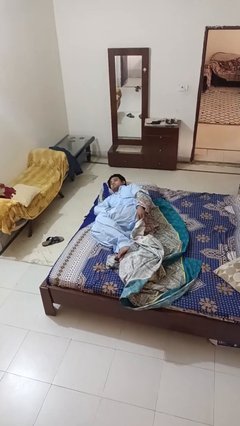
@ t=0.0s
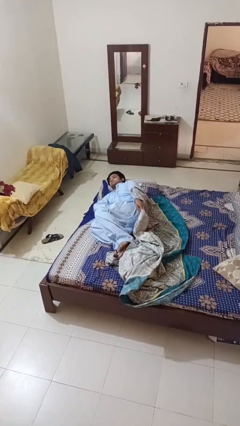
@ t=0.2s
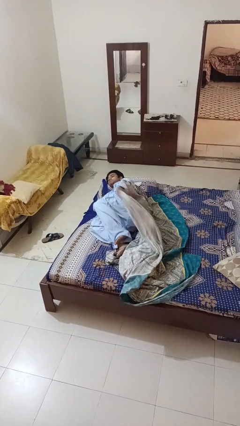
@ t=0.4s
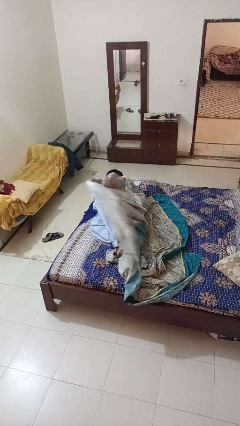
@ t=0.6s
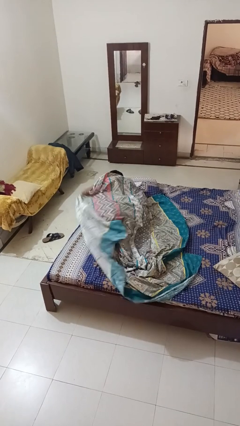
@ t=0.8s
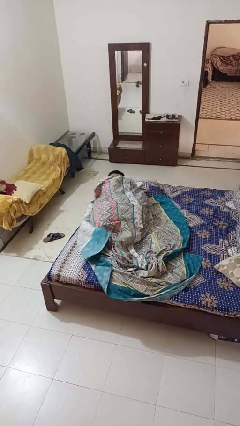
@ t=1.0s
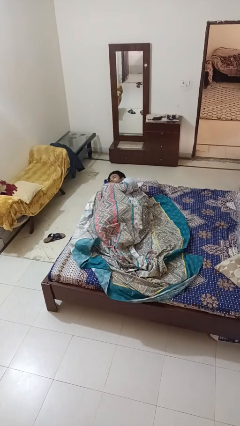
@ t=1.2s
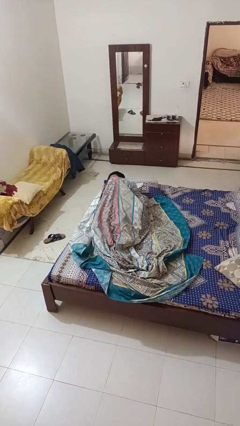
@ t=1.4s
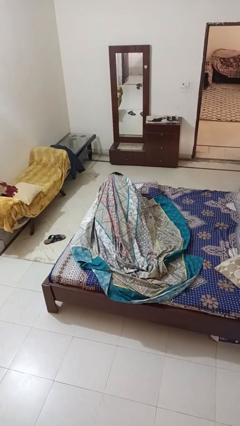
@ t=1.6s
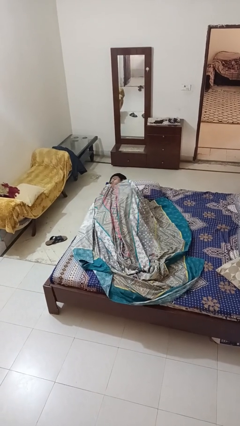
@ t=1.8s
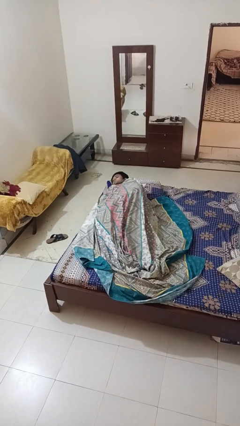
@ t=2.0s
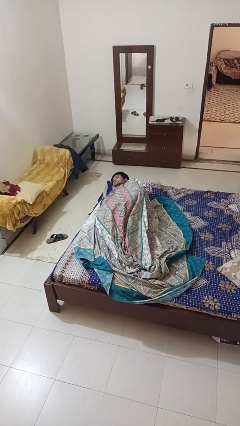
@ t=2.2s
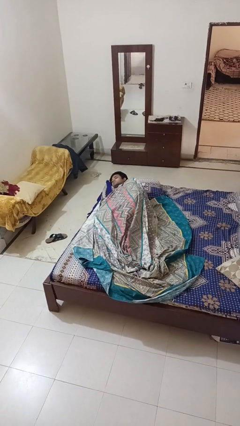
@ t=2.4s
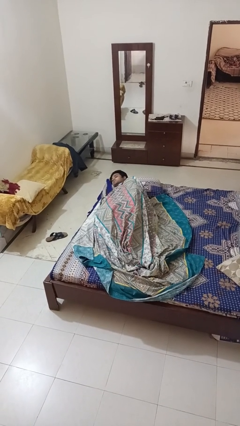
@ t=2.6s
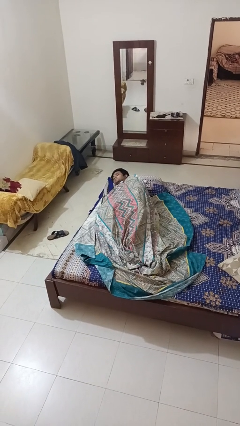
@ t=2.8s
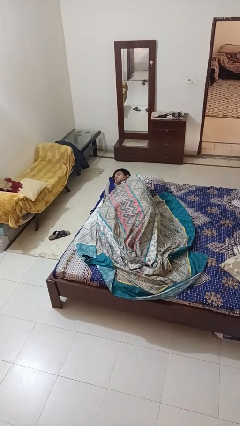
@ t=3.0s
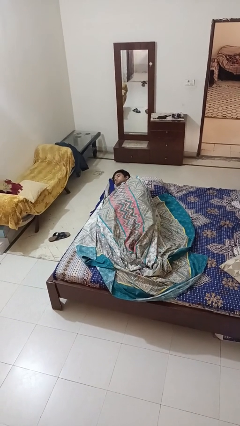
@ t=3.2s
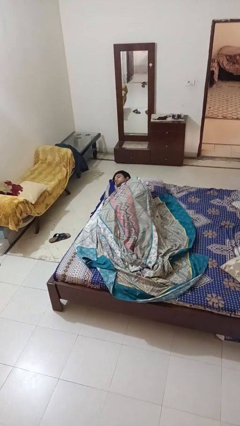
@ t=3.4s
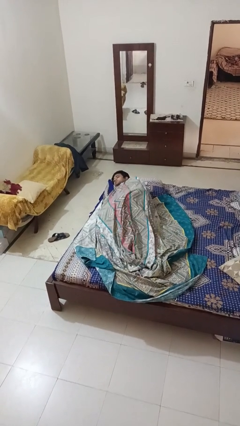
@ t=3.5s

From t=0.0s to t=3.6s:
person covers with bedsheets

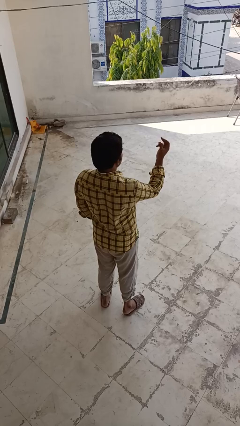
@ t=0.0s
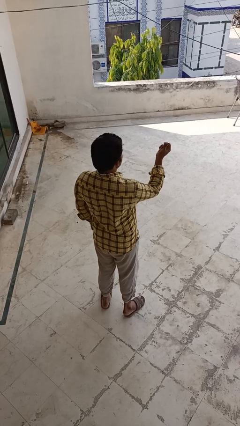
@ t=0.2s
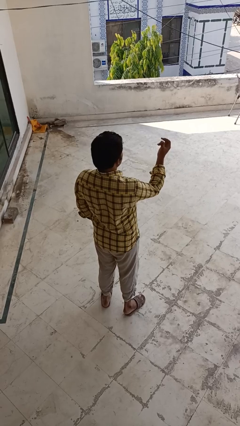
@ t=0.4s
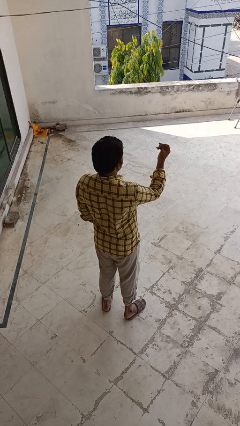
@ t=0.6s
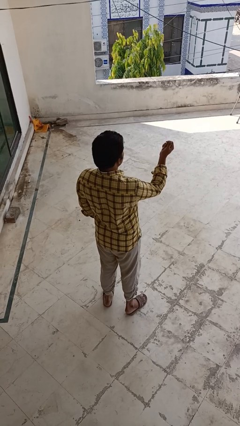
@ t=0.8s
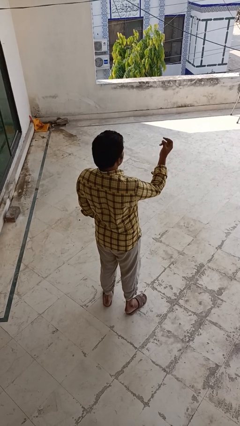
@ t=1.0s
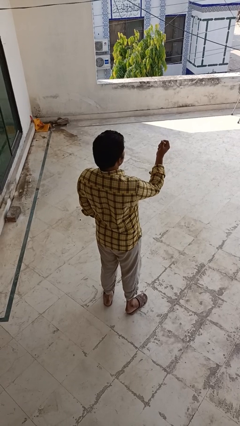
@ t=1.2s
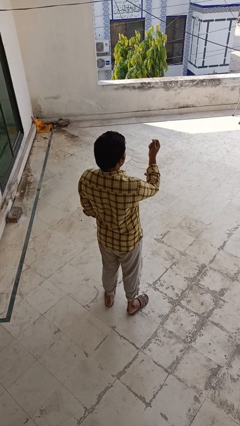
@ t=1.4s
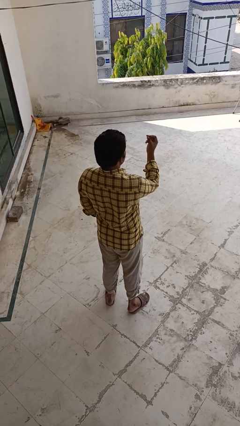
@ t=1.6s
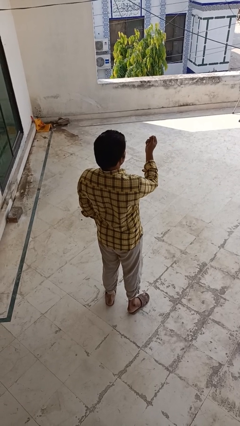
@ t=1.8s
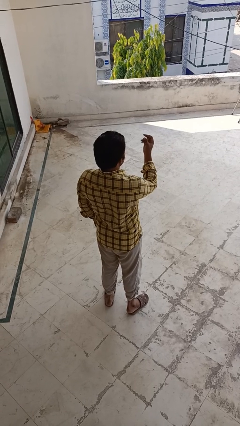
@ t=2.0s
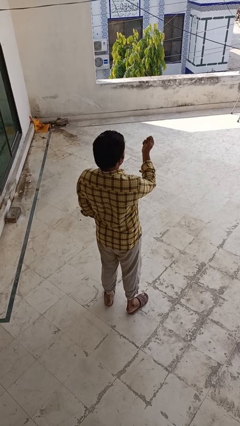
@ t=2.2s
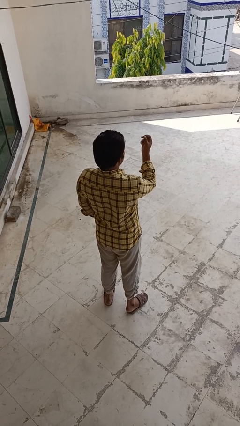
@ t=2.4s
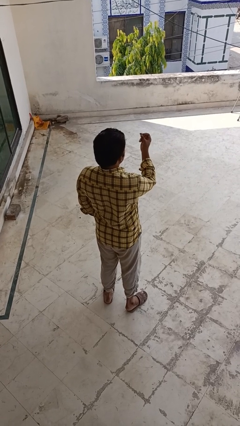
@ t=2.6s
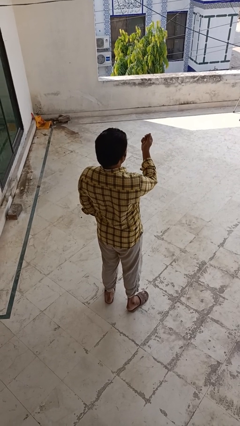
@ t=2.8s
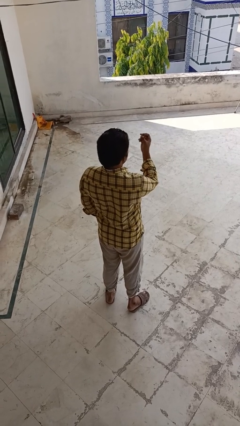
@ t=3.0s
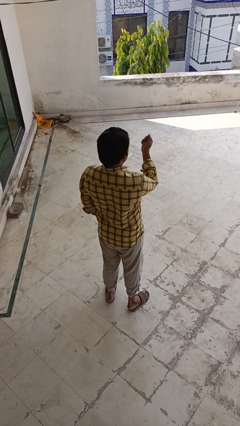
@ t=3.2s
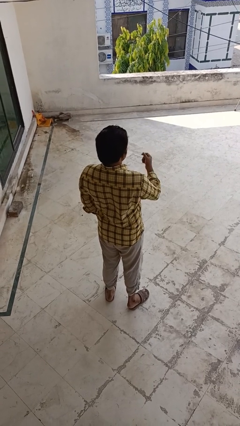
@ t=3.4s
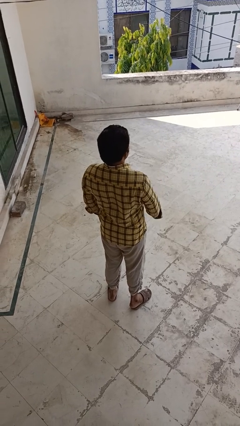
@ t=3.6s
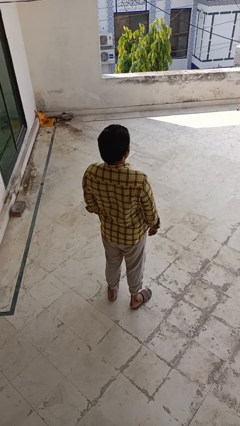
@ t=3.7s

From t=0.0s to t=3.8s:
person snaps fingers

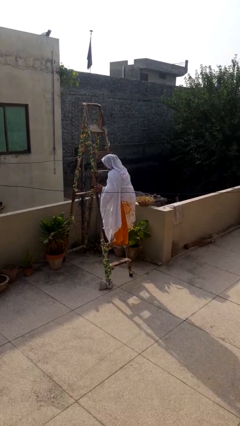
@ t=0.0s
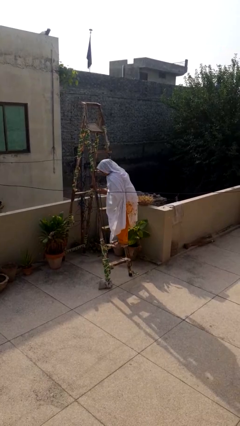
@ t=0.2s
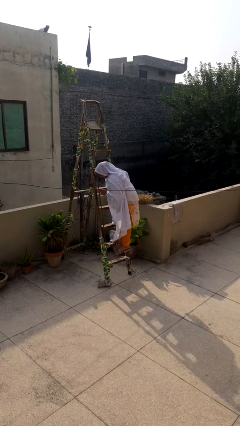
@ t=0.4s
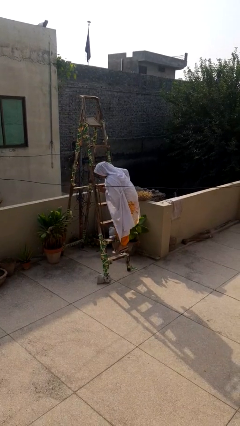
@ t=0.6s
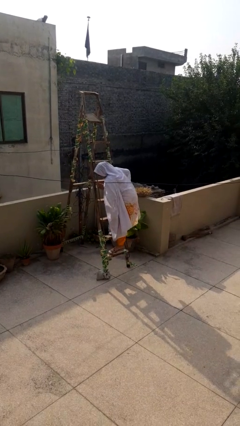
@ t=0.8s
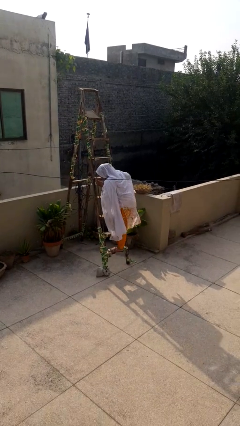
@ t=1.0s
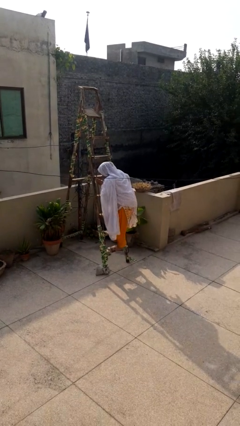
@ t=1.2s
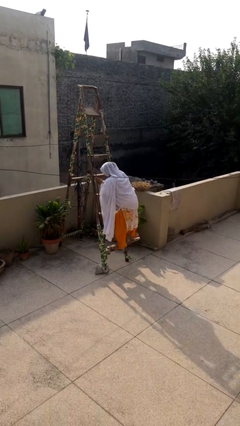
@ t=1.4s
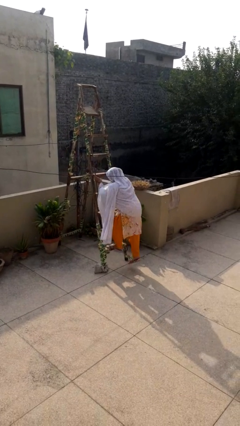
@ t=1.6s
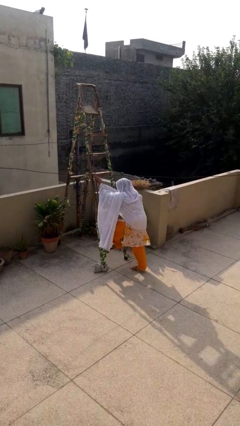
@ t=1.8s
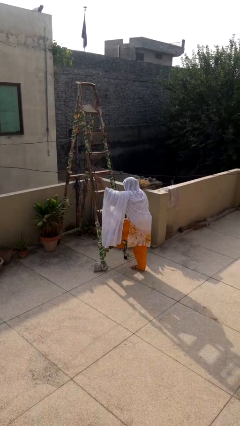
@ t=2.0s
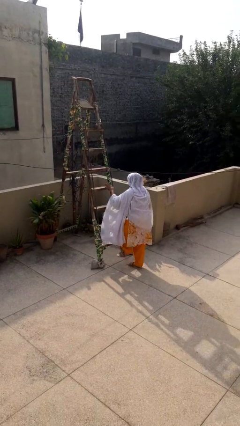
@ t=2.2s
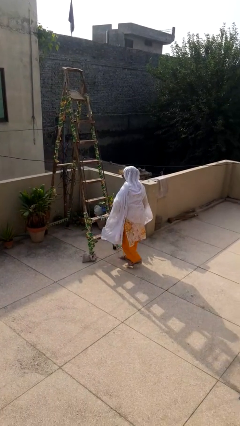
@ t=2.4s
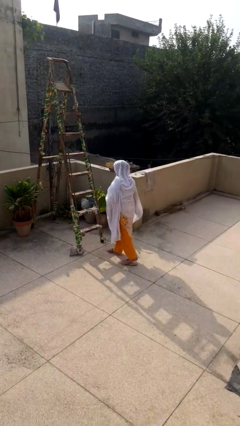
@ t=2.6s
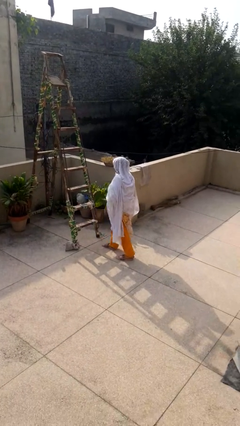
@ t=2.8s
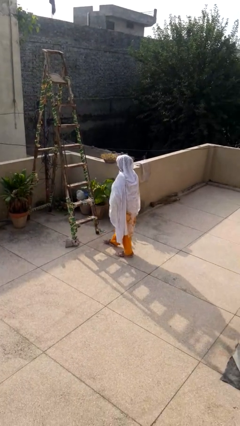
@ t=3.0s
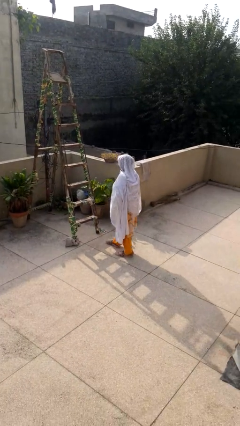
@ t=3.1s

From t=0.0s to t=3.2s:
person climbs down ladder

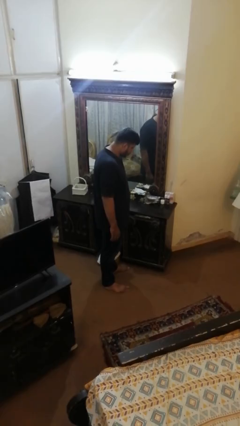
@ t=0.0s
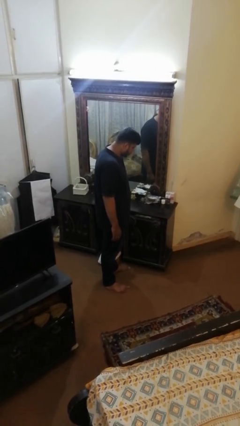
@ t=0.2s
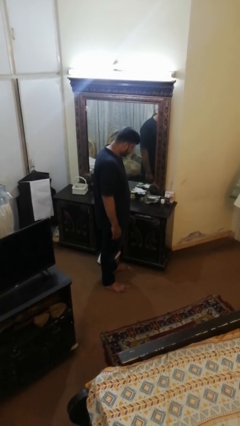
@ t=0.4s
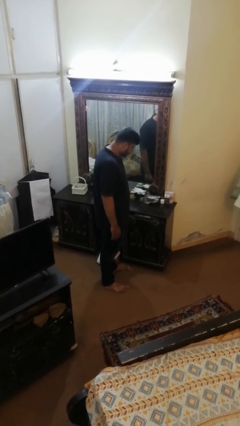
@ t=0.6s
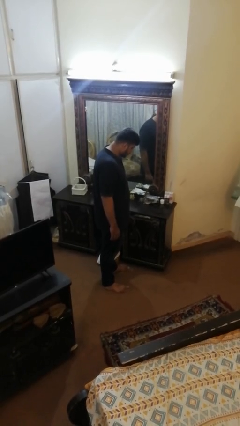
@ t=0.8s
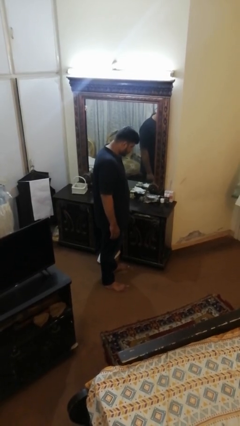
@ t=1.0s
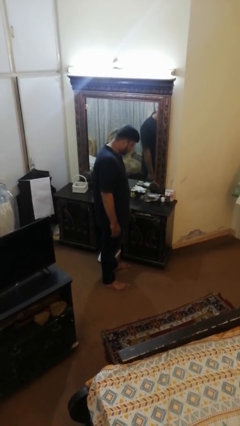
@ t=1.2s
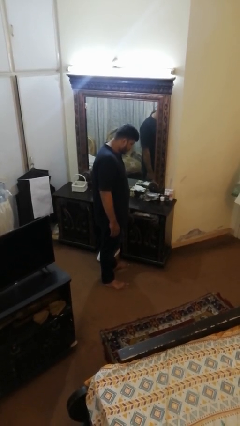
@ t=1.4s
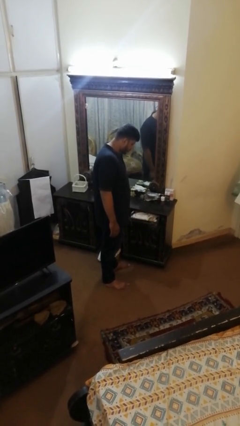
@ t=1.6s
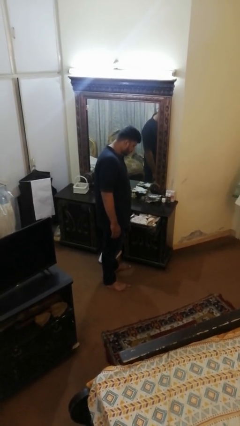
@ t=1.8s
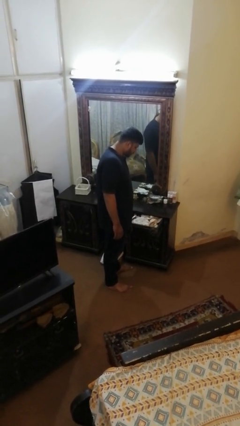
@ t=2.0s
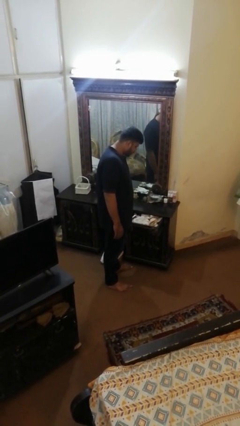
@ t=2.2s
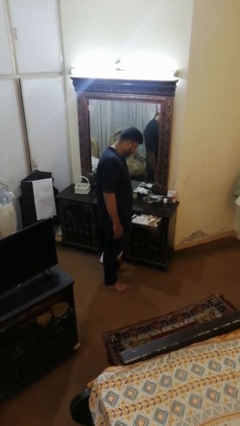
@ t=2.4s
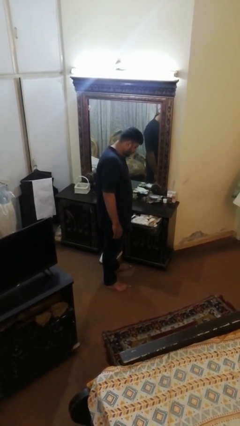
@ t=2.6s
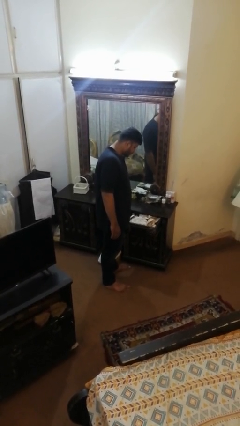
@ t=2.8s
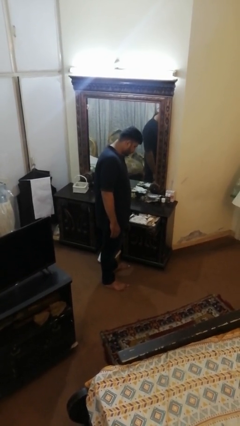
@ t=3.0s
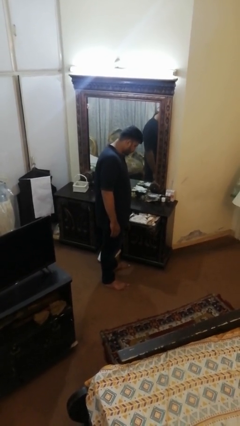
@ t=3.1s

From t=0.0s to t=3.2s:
person opens dresser drawer

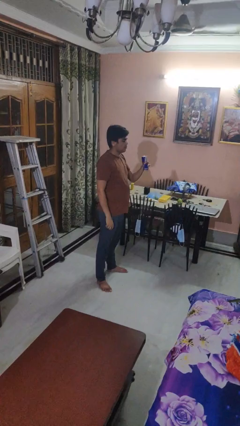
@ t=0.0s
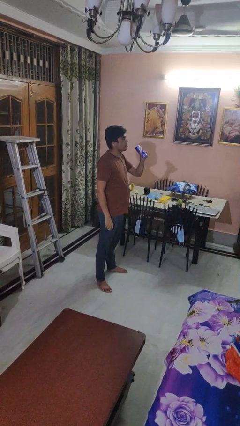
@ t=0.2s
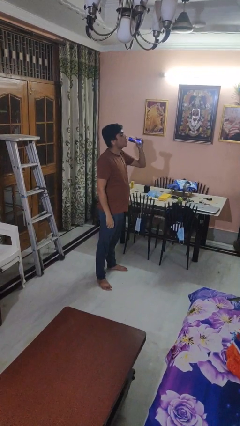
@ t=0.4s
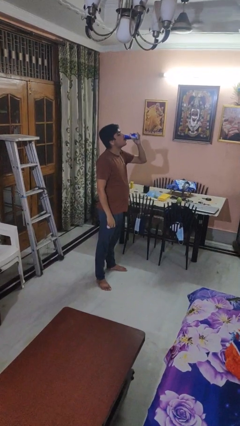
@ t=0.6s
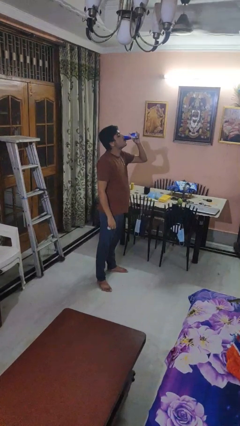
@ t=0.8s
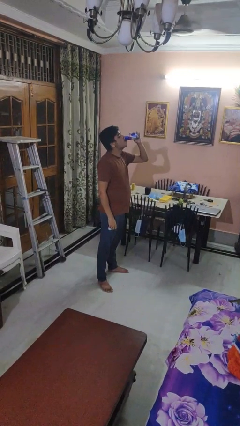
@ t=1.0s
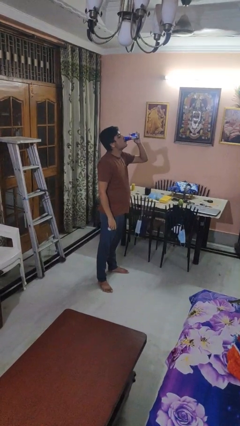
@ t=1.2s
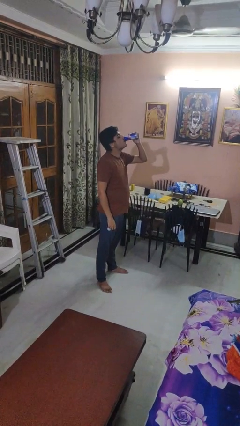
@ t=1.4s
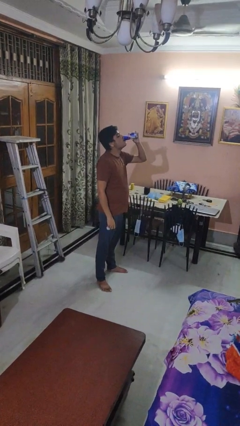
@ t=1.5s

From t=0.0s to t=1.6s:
person drinks from beverage can

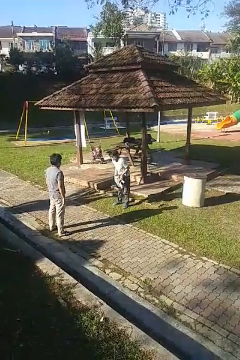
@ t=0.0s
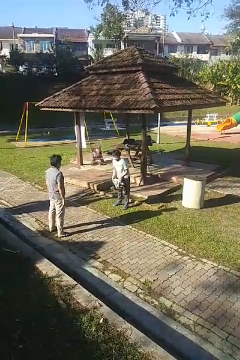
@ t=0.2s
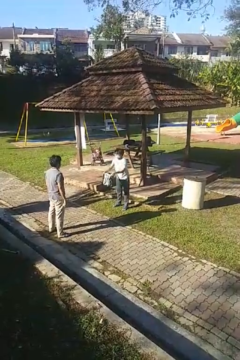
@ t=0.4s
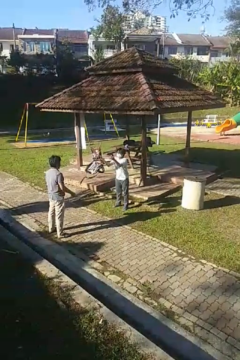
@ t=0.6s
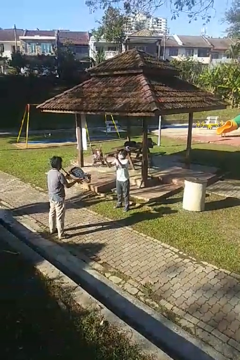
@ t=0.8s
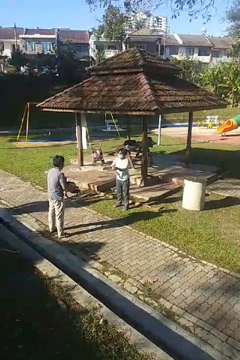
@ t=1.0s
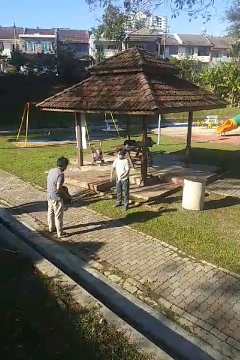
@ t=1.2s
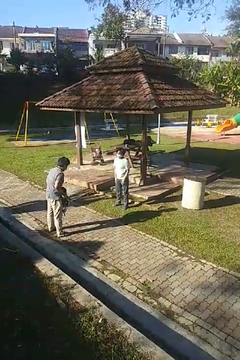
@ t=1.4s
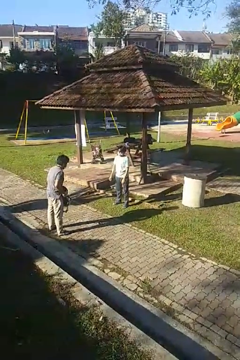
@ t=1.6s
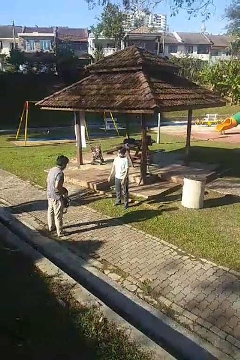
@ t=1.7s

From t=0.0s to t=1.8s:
person throws object to person

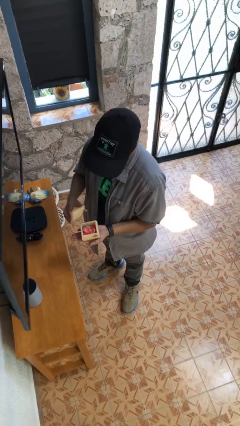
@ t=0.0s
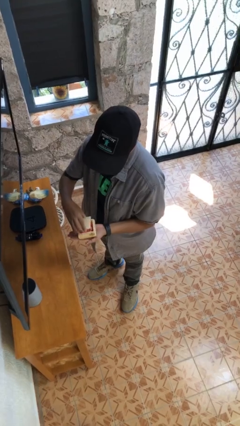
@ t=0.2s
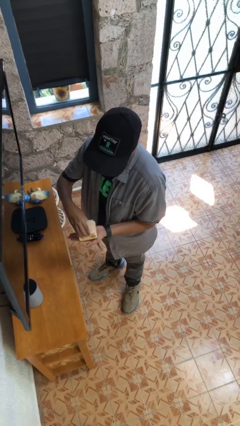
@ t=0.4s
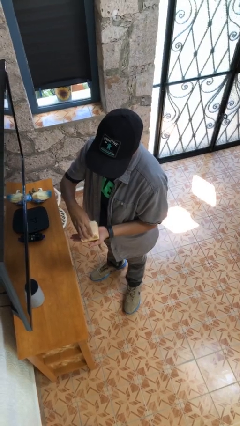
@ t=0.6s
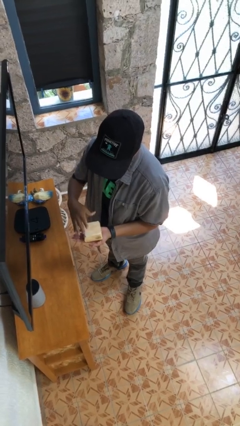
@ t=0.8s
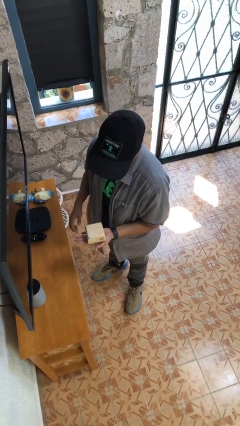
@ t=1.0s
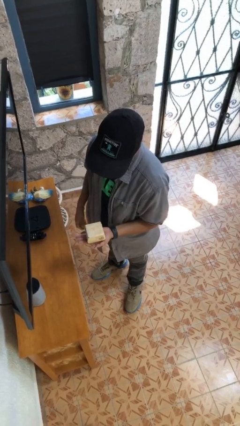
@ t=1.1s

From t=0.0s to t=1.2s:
person closes jewelry box
